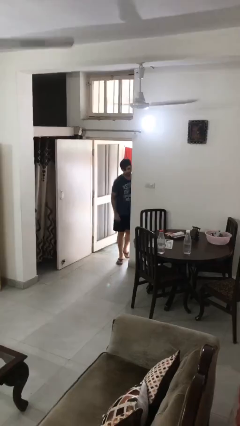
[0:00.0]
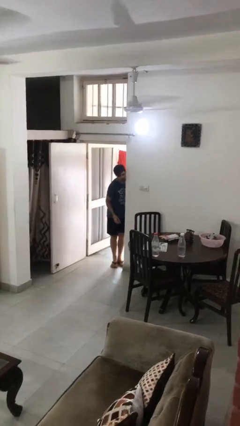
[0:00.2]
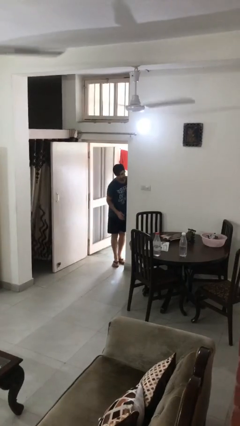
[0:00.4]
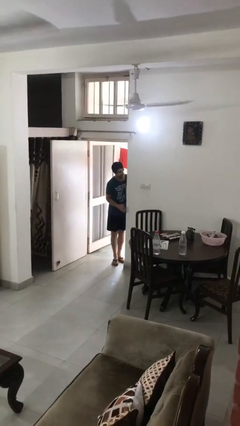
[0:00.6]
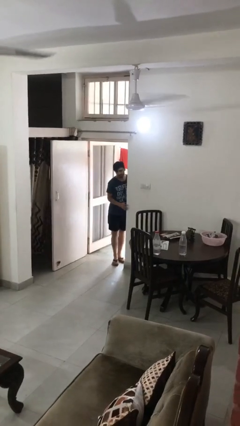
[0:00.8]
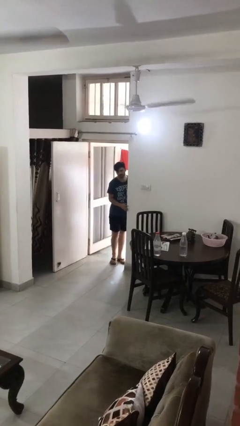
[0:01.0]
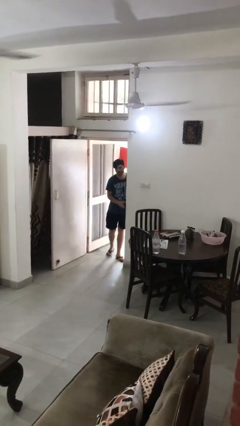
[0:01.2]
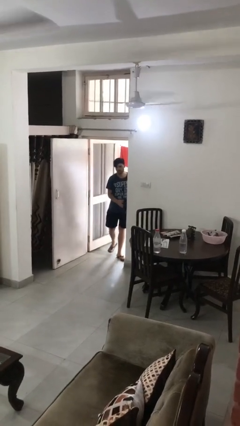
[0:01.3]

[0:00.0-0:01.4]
person bumps into wall

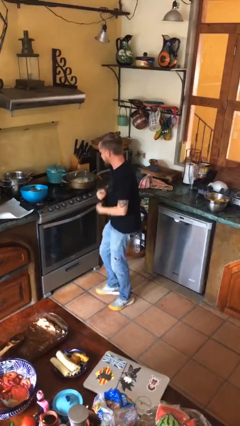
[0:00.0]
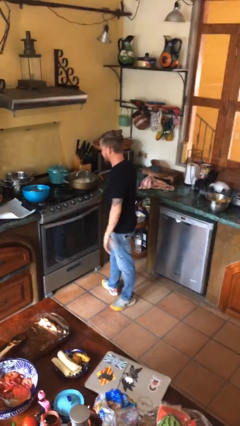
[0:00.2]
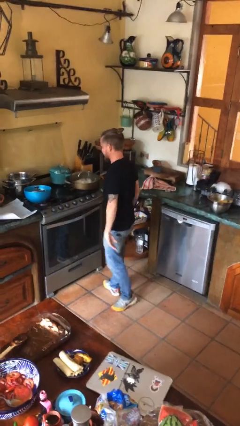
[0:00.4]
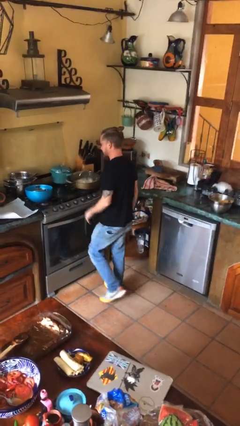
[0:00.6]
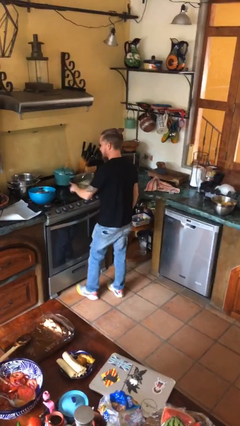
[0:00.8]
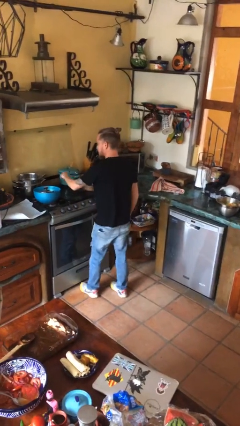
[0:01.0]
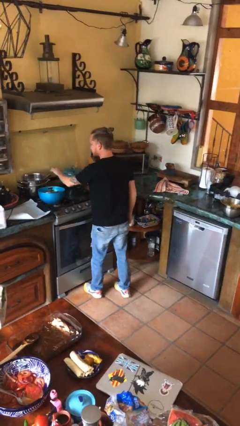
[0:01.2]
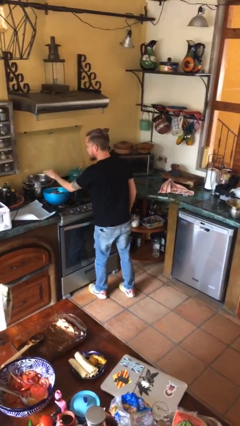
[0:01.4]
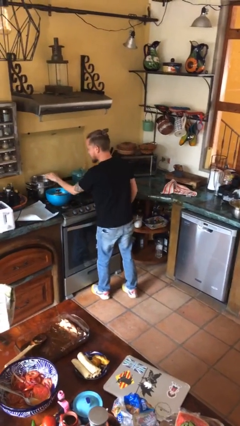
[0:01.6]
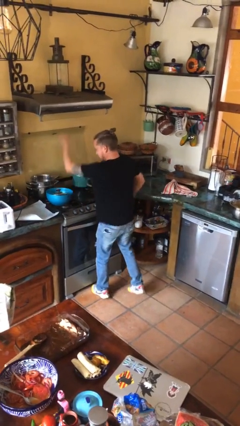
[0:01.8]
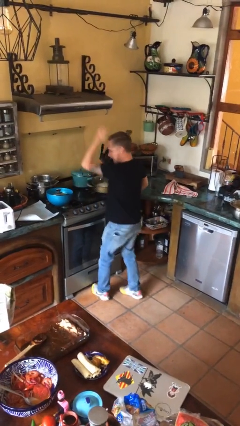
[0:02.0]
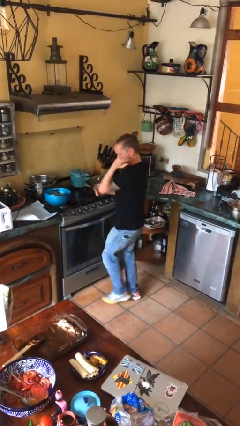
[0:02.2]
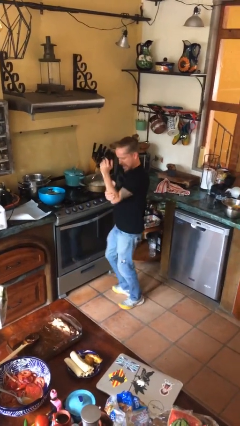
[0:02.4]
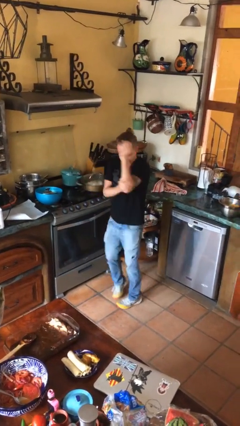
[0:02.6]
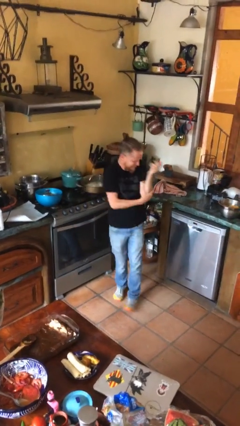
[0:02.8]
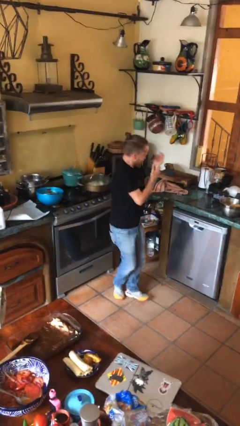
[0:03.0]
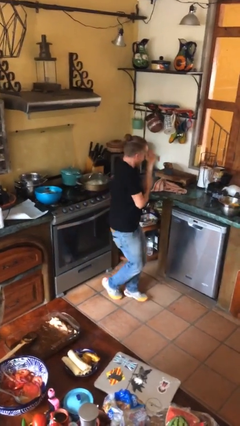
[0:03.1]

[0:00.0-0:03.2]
person burns hand

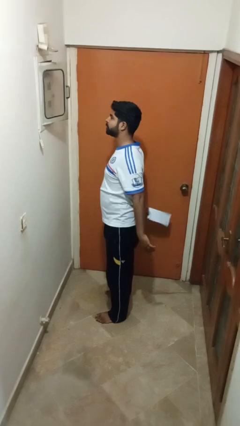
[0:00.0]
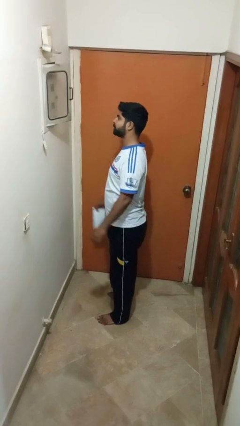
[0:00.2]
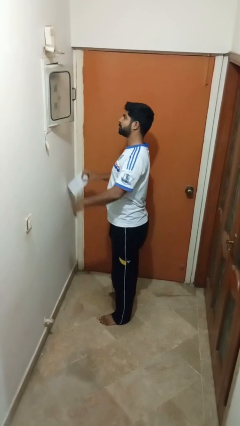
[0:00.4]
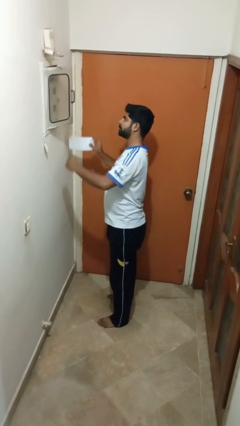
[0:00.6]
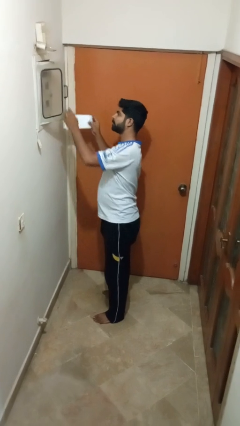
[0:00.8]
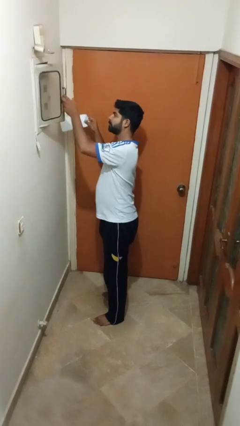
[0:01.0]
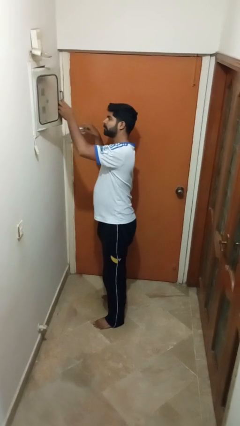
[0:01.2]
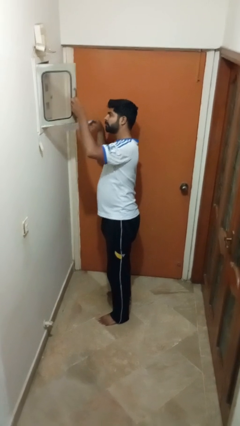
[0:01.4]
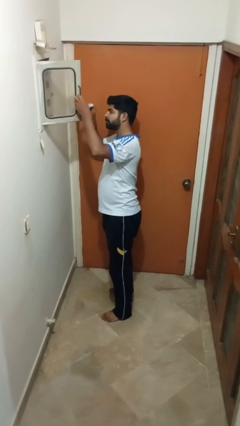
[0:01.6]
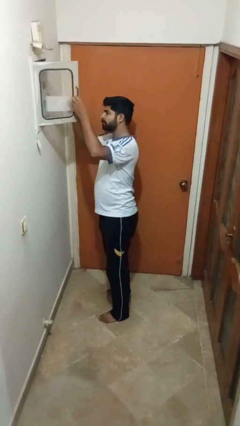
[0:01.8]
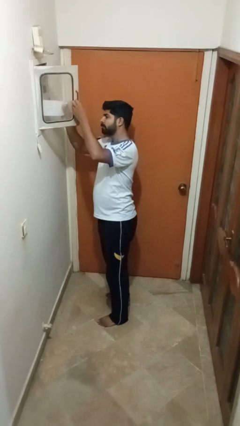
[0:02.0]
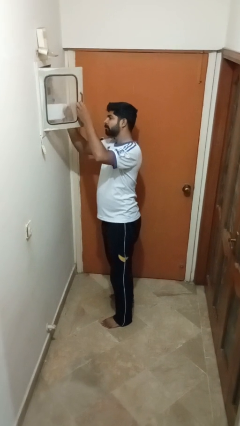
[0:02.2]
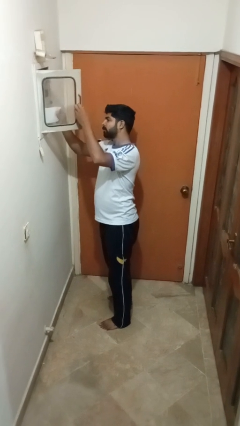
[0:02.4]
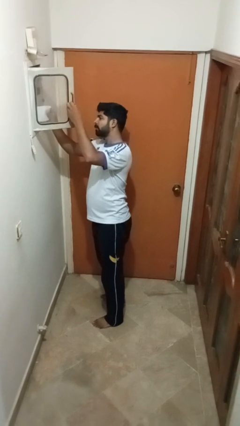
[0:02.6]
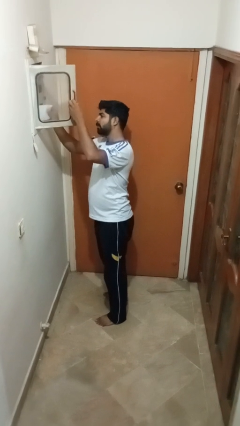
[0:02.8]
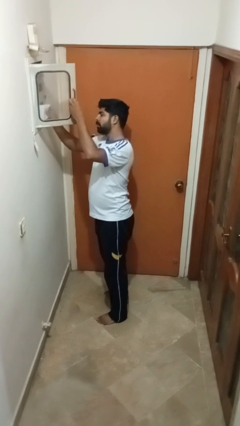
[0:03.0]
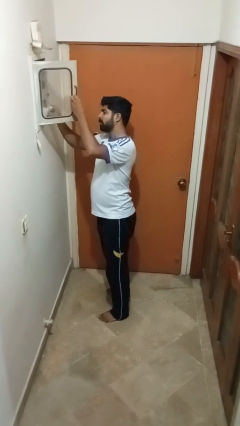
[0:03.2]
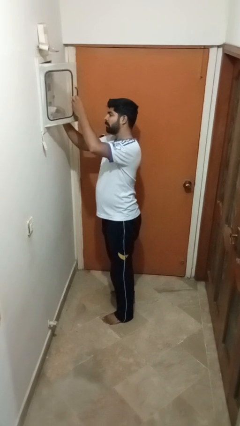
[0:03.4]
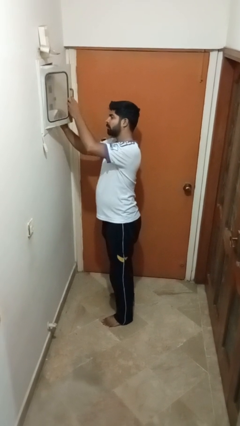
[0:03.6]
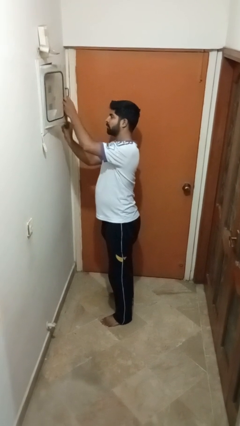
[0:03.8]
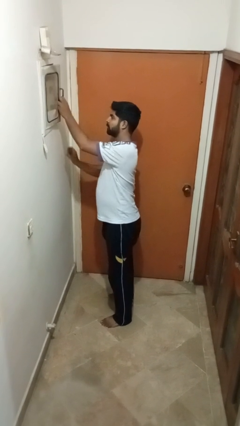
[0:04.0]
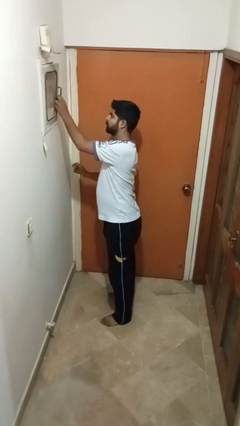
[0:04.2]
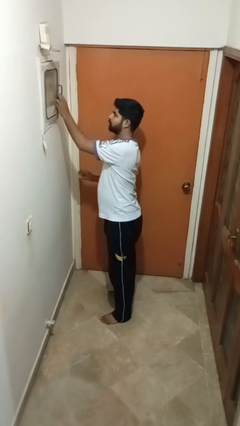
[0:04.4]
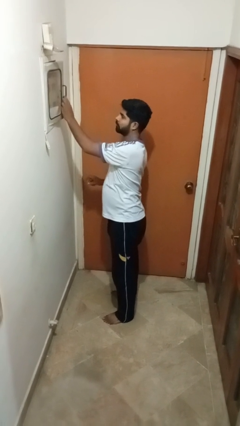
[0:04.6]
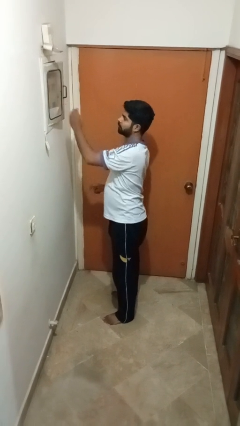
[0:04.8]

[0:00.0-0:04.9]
person puts letters in mailbox

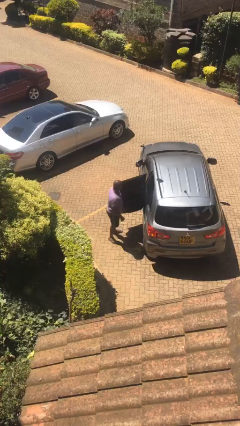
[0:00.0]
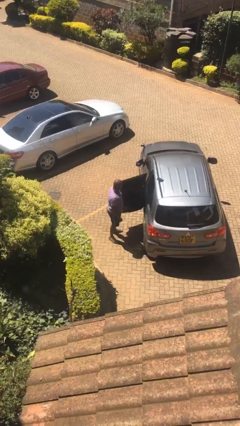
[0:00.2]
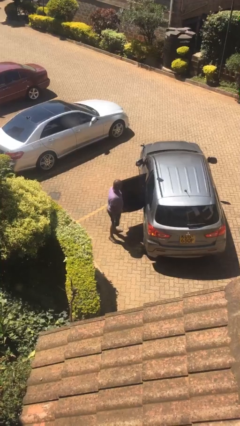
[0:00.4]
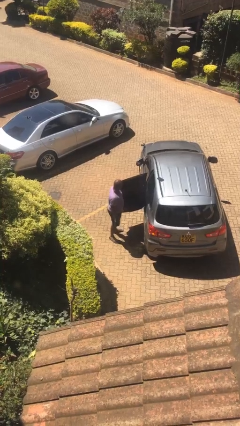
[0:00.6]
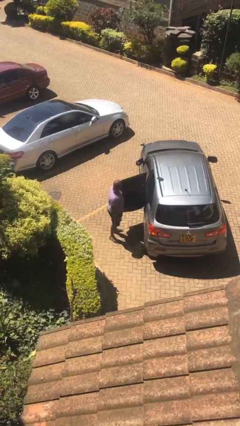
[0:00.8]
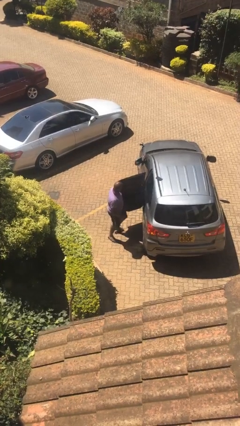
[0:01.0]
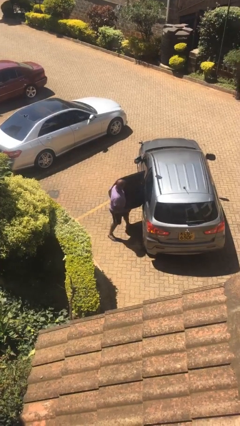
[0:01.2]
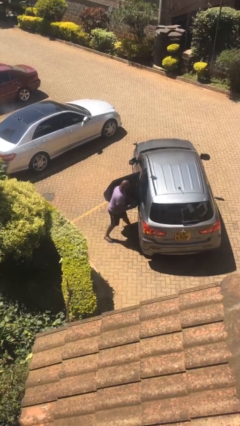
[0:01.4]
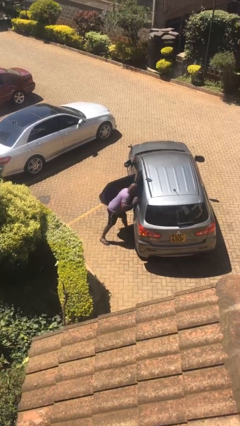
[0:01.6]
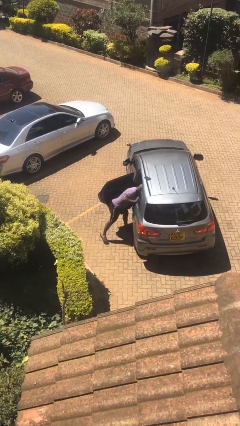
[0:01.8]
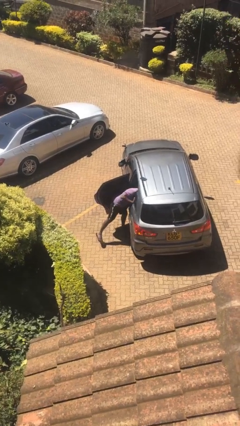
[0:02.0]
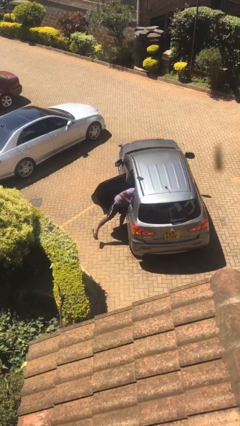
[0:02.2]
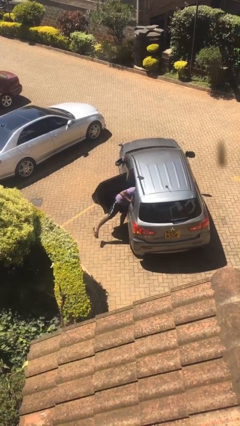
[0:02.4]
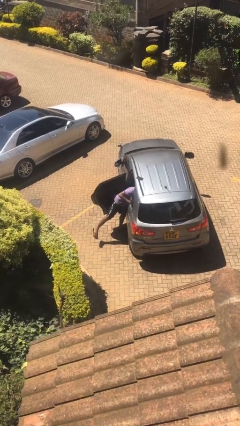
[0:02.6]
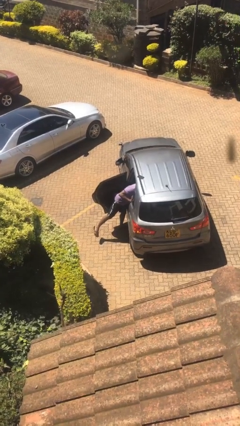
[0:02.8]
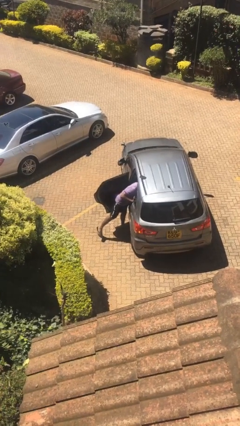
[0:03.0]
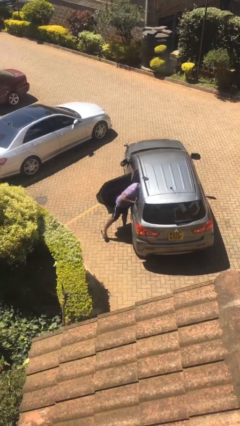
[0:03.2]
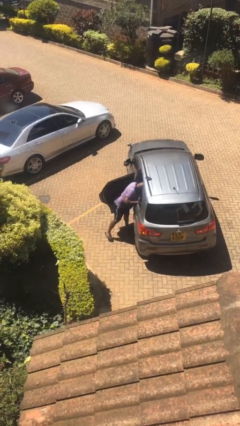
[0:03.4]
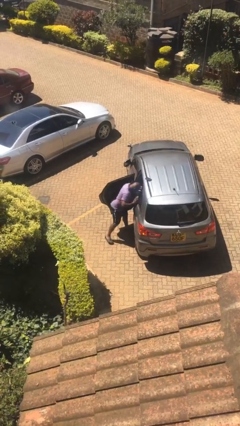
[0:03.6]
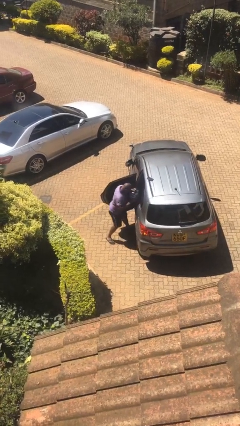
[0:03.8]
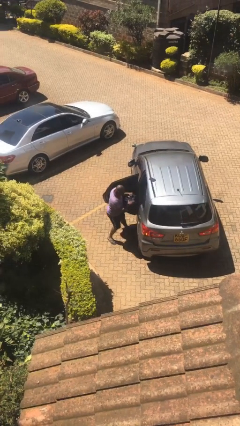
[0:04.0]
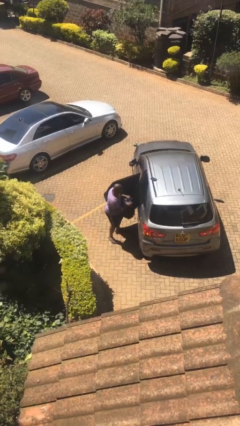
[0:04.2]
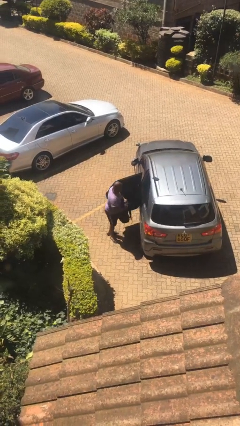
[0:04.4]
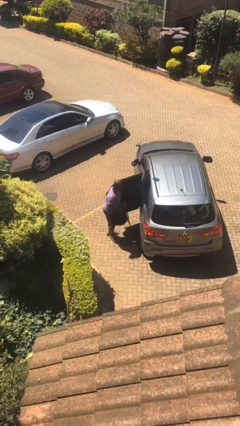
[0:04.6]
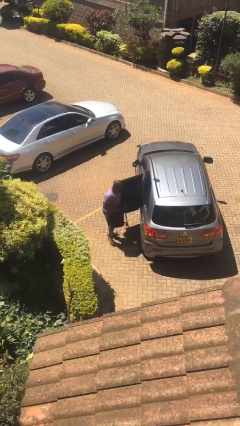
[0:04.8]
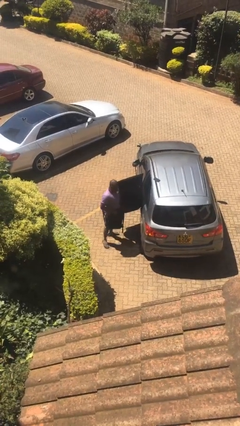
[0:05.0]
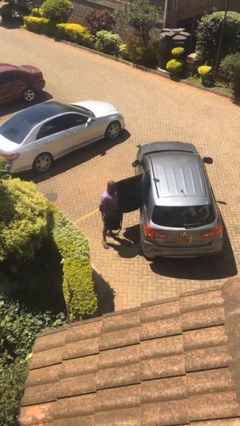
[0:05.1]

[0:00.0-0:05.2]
person unloads car

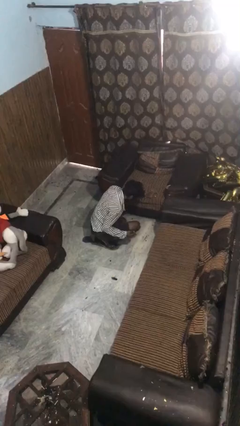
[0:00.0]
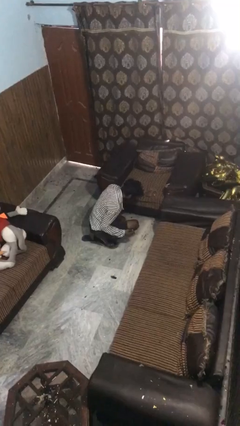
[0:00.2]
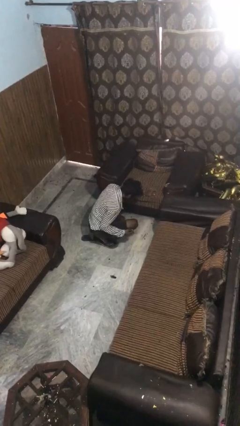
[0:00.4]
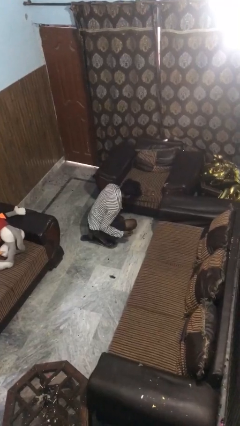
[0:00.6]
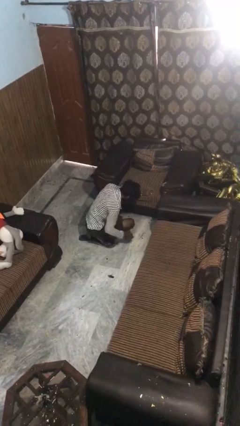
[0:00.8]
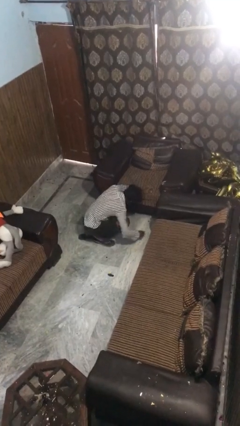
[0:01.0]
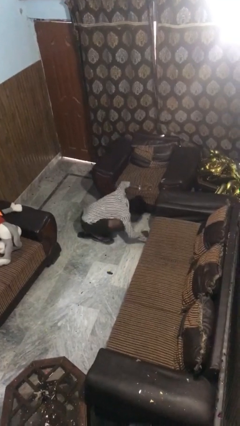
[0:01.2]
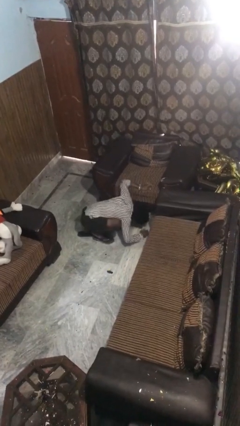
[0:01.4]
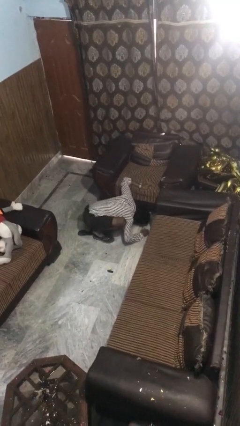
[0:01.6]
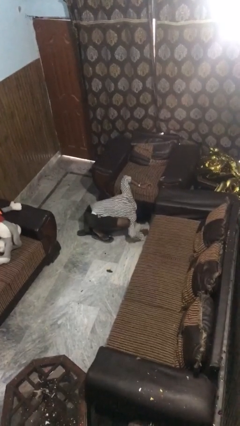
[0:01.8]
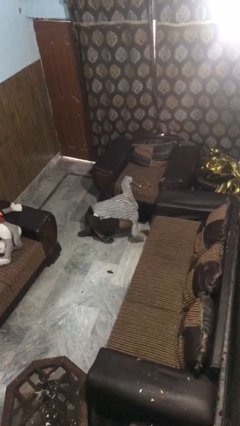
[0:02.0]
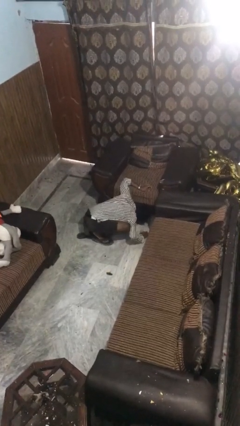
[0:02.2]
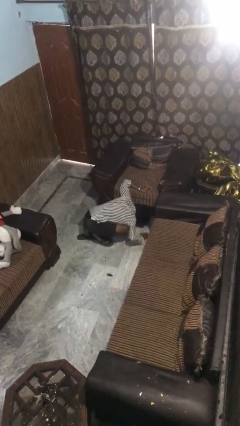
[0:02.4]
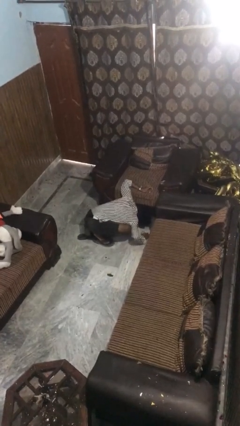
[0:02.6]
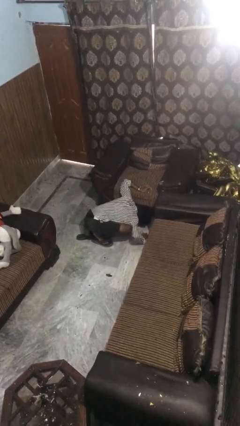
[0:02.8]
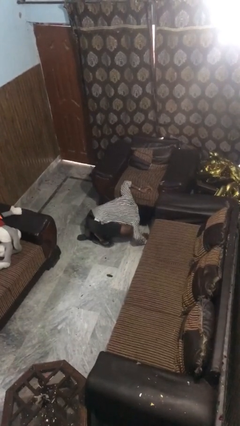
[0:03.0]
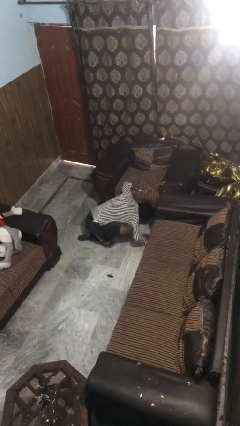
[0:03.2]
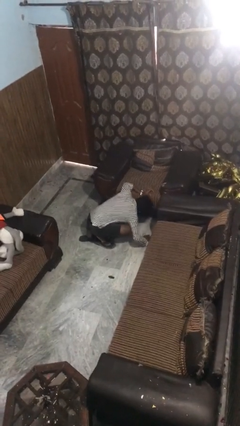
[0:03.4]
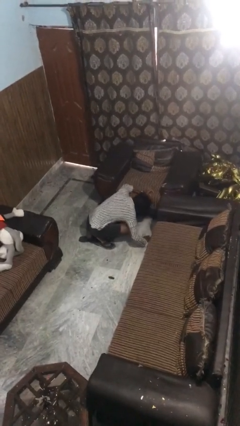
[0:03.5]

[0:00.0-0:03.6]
person searches under couch
